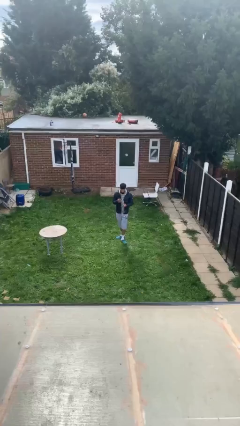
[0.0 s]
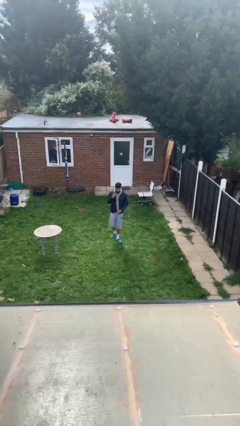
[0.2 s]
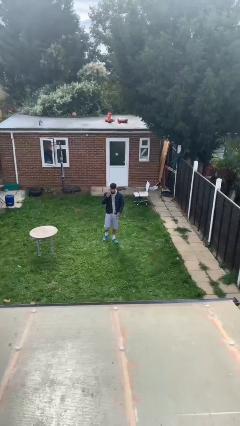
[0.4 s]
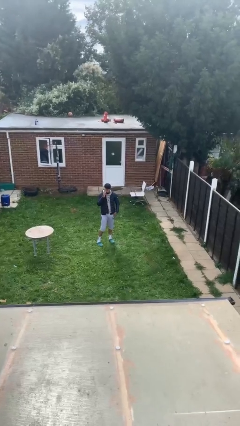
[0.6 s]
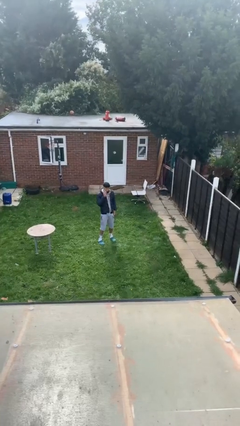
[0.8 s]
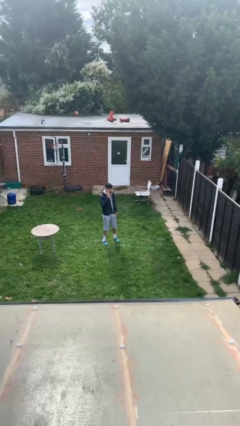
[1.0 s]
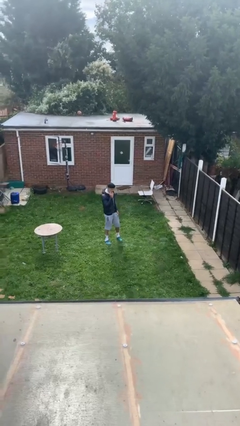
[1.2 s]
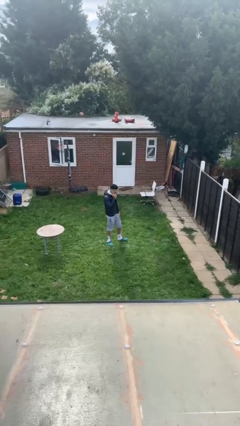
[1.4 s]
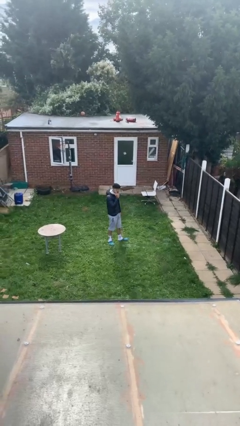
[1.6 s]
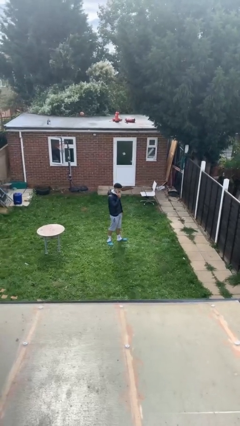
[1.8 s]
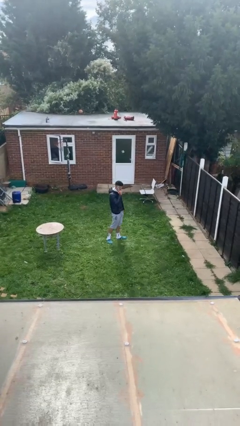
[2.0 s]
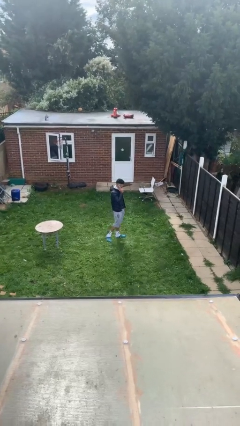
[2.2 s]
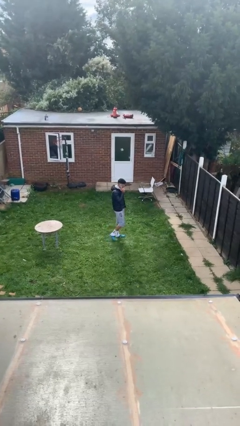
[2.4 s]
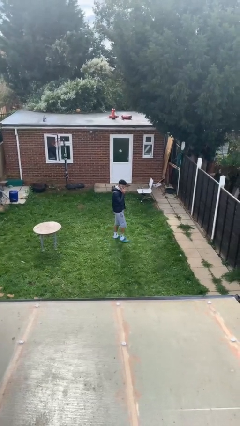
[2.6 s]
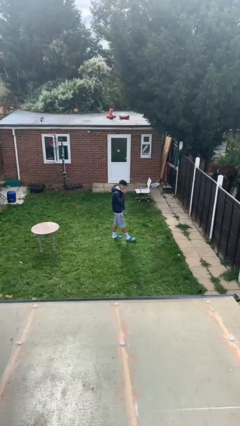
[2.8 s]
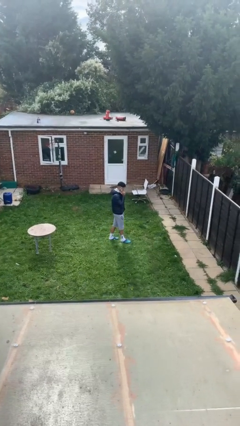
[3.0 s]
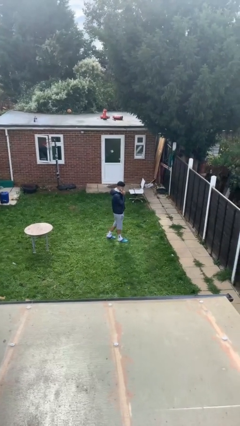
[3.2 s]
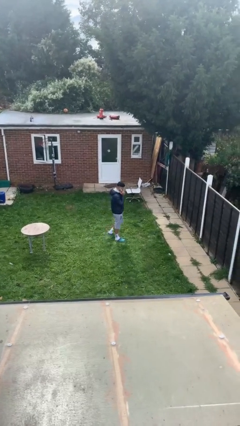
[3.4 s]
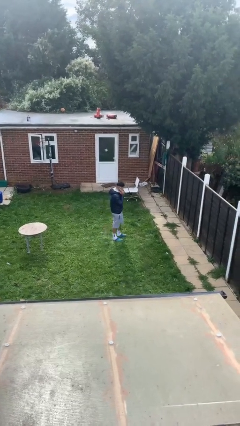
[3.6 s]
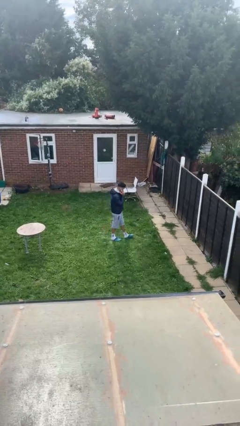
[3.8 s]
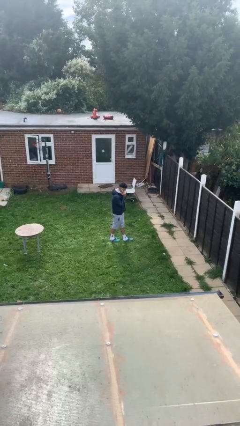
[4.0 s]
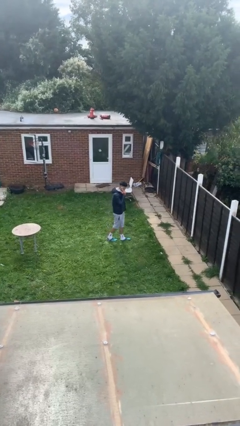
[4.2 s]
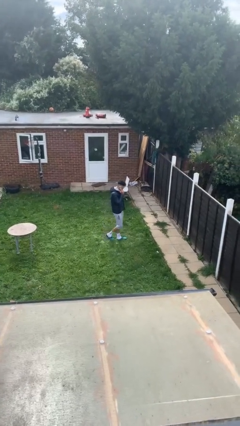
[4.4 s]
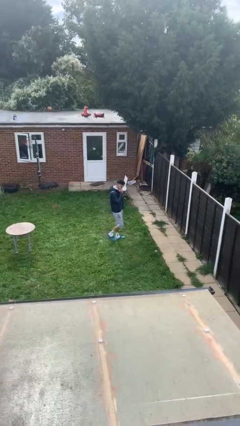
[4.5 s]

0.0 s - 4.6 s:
person talks on phone

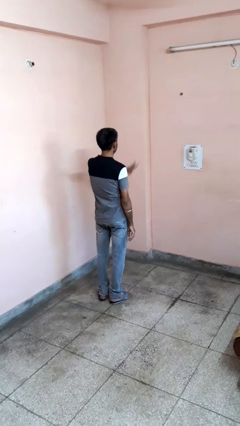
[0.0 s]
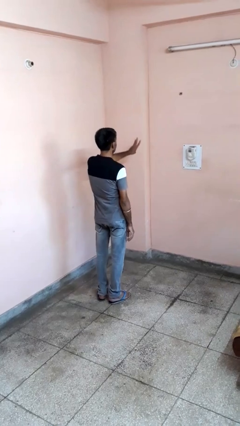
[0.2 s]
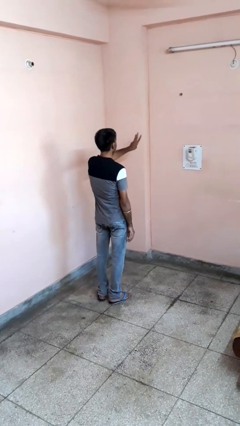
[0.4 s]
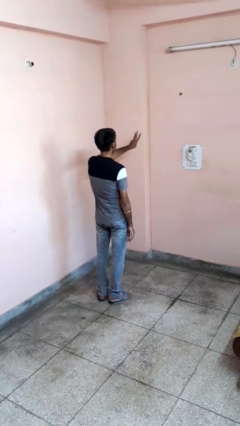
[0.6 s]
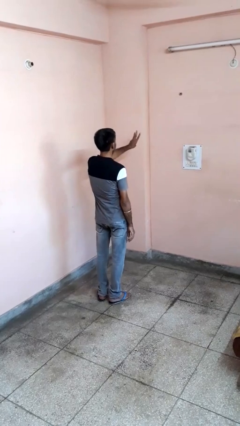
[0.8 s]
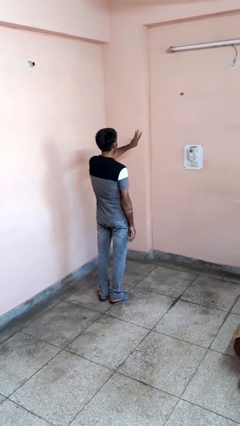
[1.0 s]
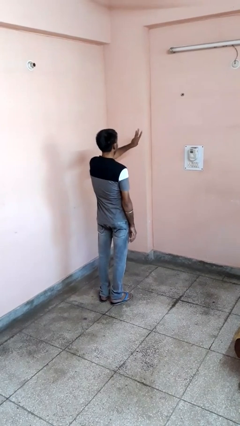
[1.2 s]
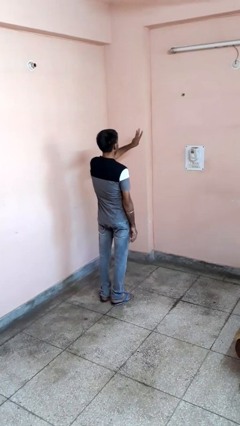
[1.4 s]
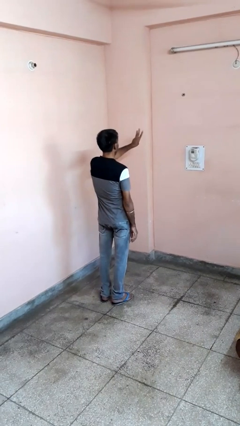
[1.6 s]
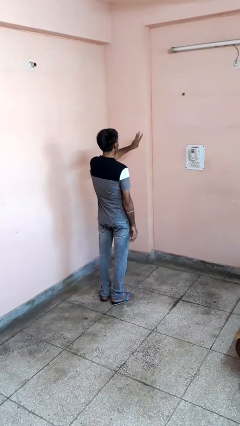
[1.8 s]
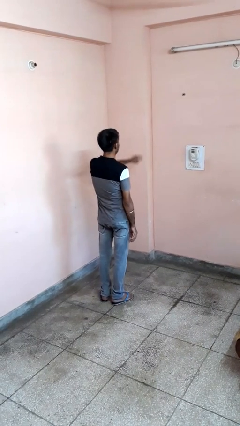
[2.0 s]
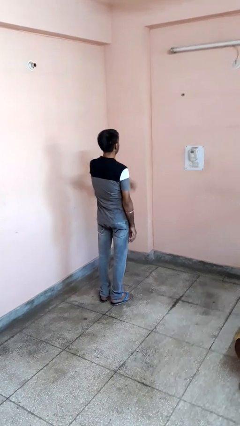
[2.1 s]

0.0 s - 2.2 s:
person gestures number three

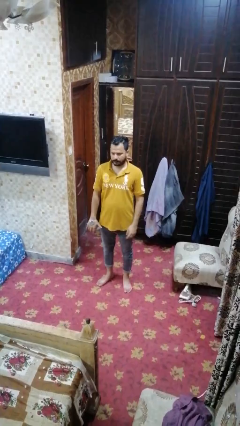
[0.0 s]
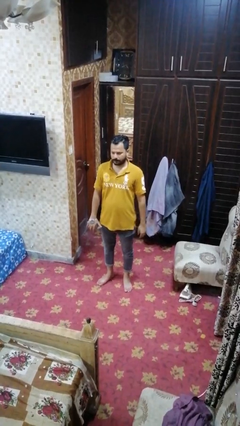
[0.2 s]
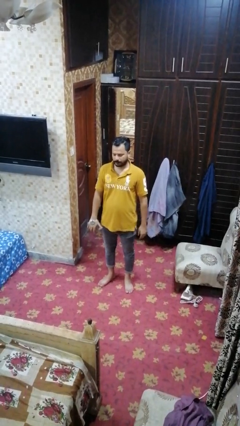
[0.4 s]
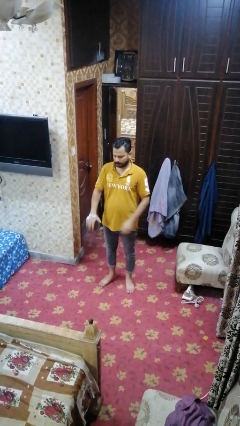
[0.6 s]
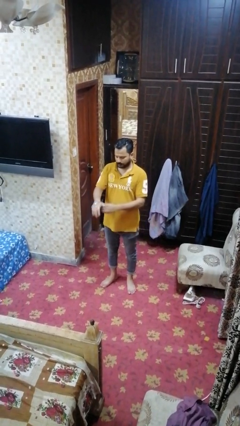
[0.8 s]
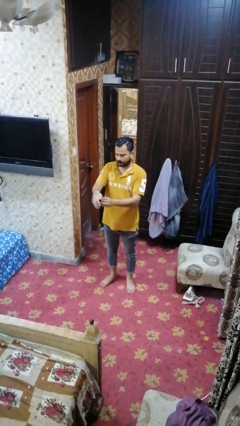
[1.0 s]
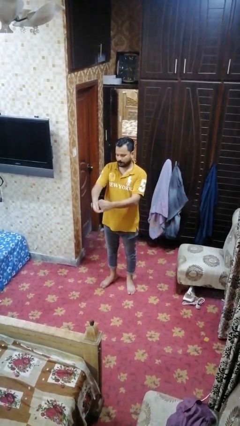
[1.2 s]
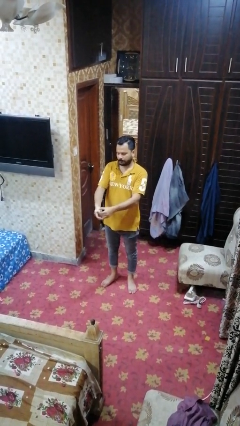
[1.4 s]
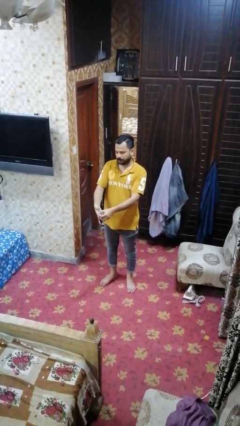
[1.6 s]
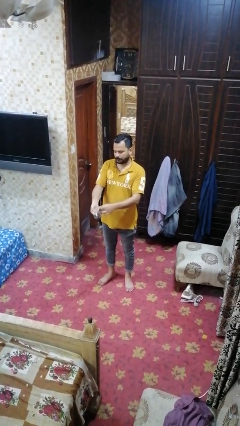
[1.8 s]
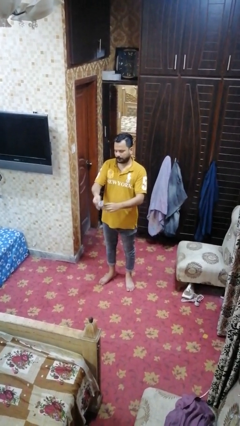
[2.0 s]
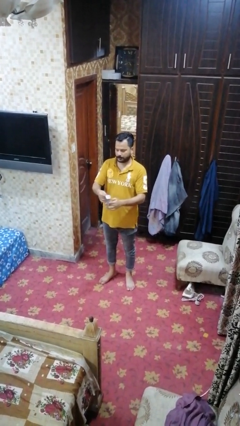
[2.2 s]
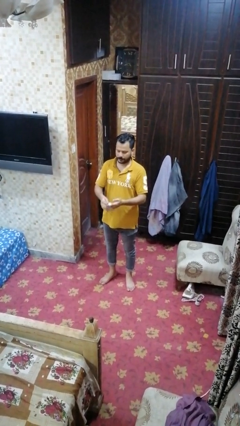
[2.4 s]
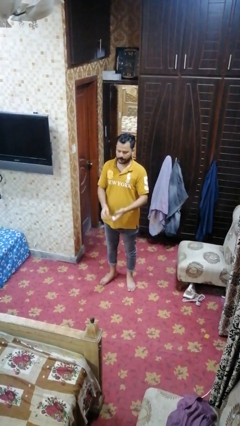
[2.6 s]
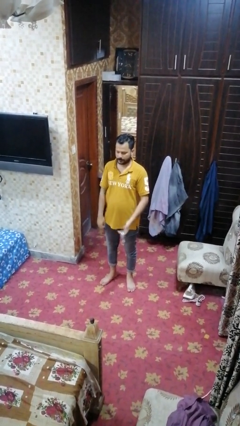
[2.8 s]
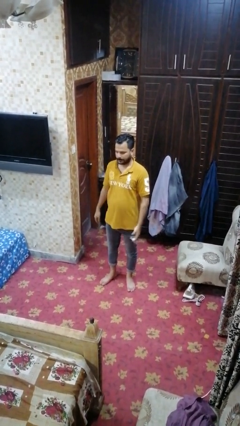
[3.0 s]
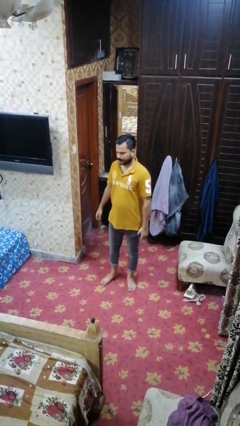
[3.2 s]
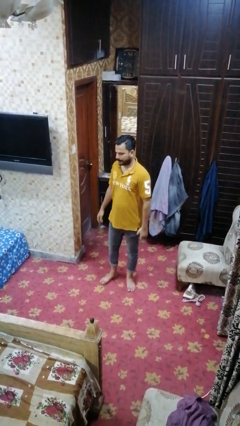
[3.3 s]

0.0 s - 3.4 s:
person takes off wristwatch

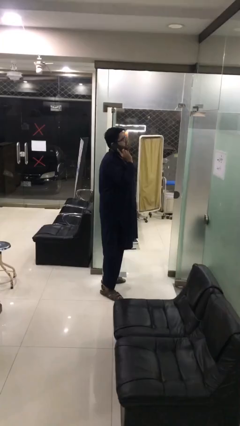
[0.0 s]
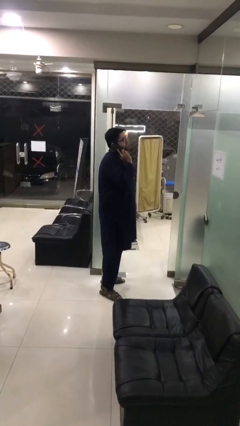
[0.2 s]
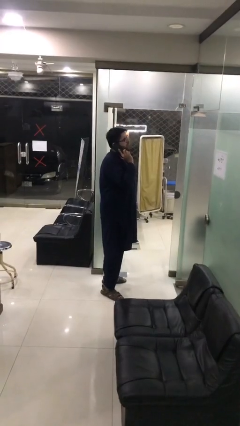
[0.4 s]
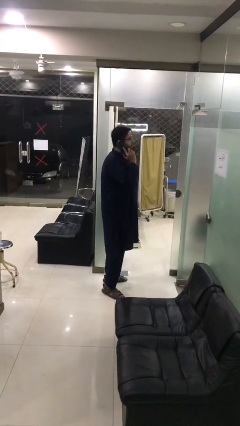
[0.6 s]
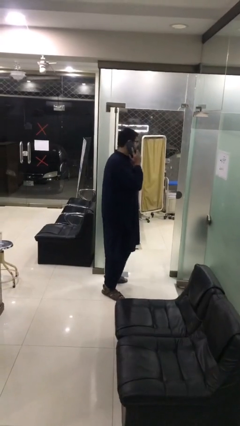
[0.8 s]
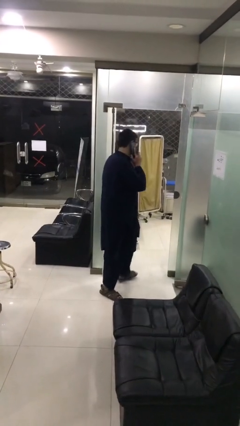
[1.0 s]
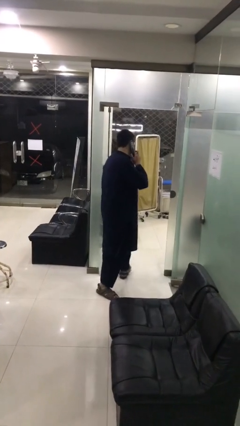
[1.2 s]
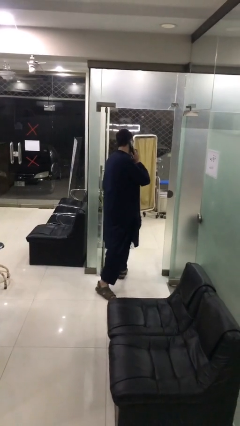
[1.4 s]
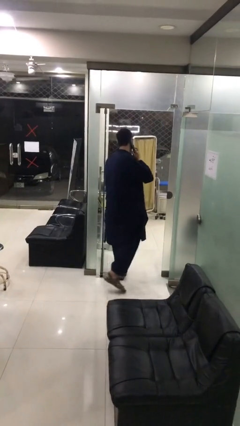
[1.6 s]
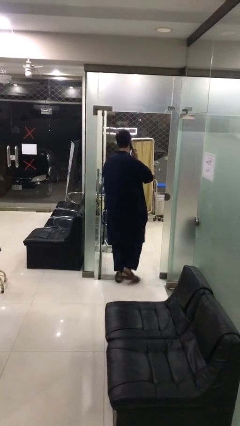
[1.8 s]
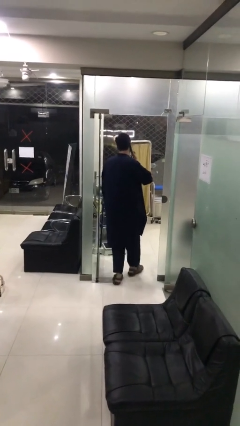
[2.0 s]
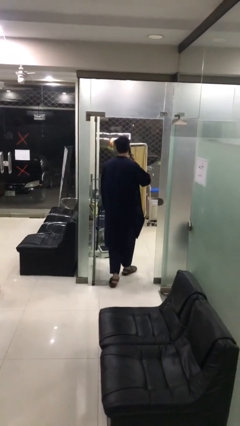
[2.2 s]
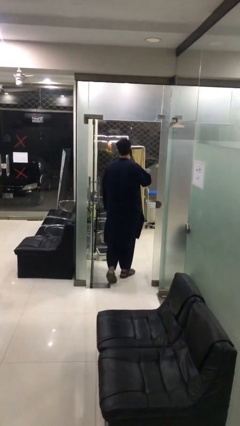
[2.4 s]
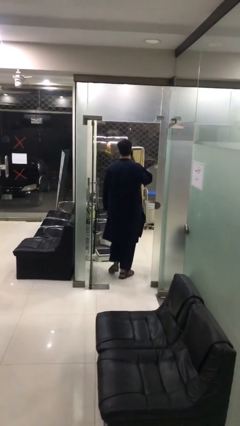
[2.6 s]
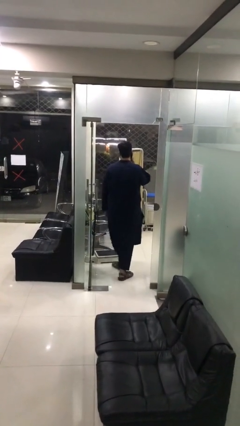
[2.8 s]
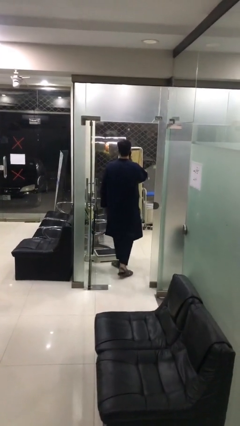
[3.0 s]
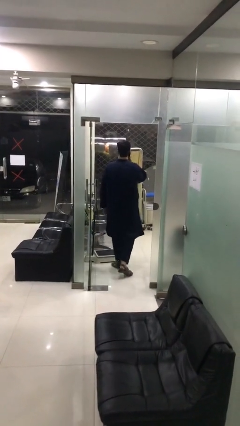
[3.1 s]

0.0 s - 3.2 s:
person exits scene through structure

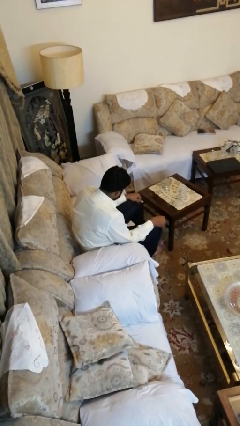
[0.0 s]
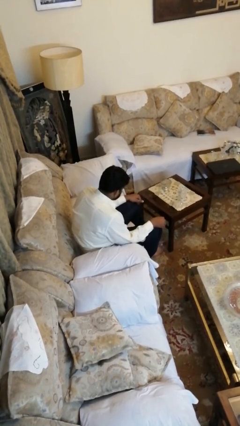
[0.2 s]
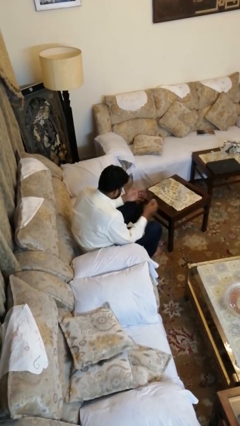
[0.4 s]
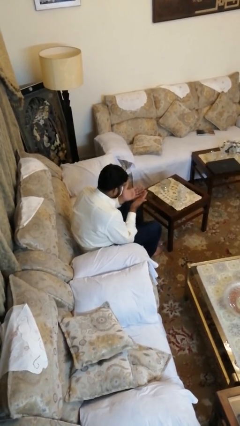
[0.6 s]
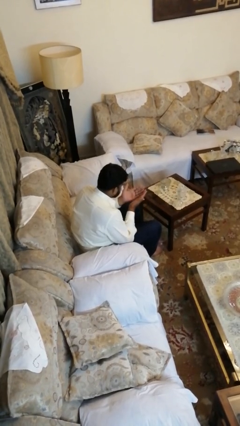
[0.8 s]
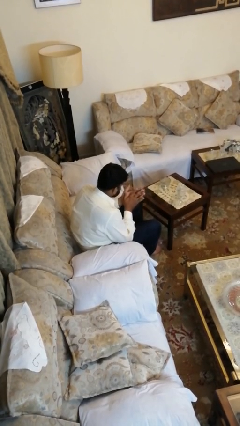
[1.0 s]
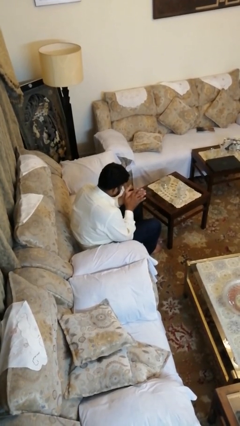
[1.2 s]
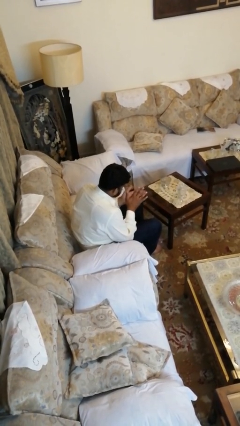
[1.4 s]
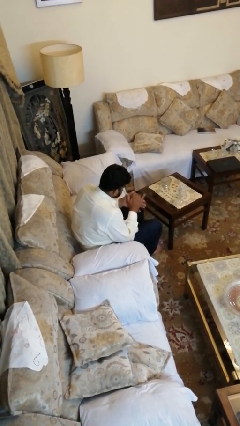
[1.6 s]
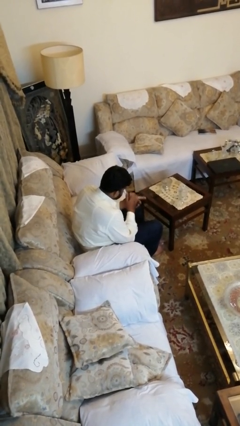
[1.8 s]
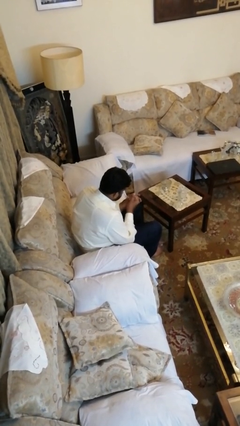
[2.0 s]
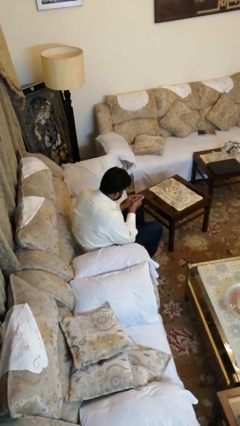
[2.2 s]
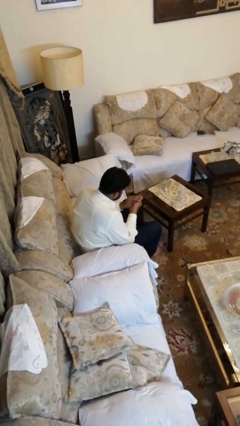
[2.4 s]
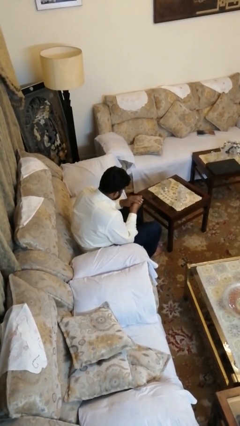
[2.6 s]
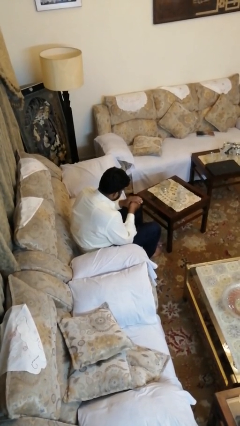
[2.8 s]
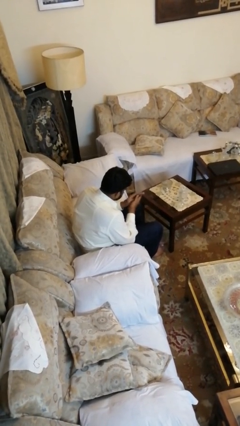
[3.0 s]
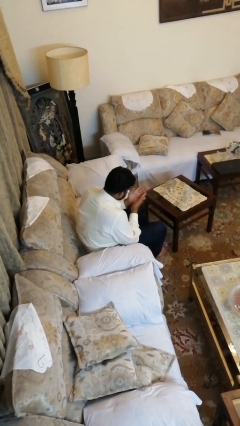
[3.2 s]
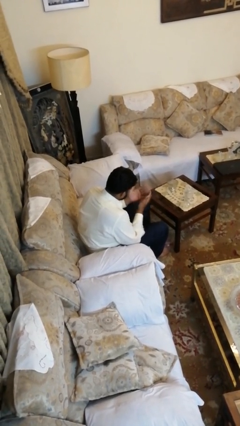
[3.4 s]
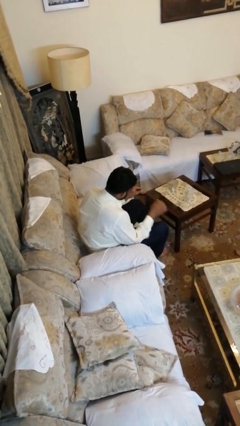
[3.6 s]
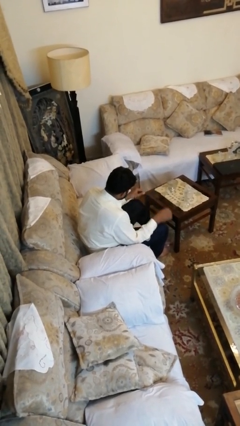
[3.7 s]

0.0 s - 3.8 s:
person looks at hands in lap
